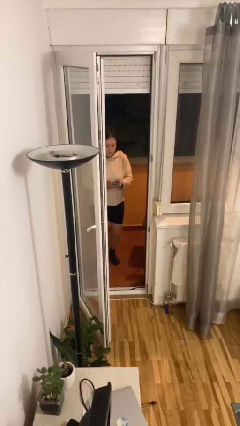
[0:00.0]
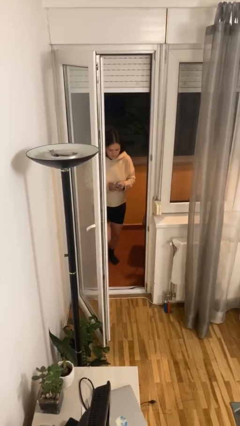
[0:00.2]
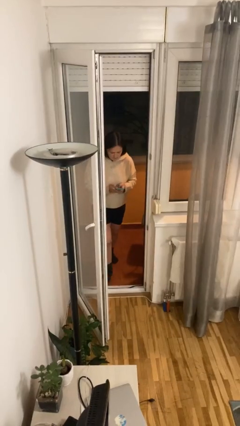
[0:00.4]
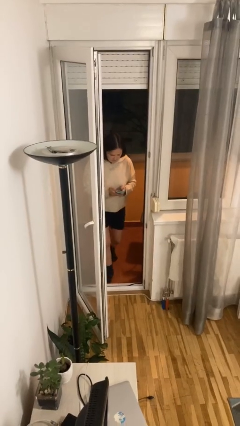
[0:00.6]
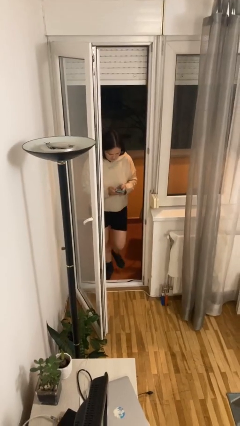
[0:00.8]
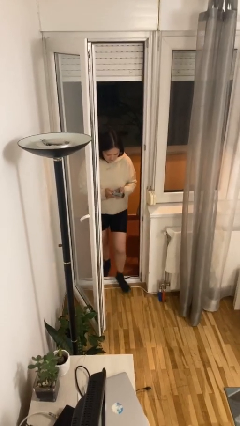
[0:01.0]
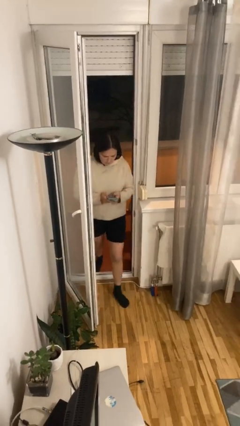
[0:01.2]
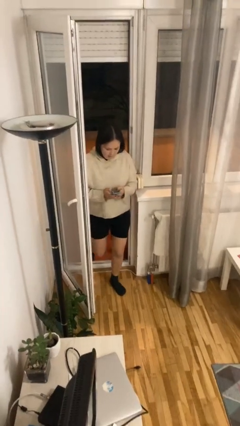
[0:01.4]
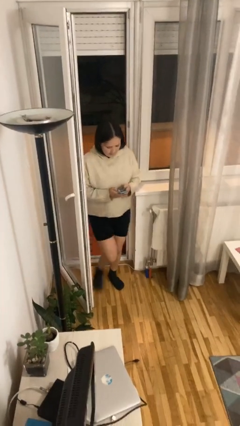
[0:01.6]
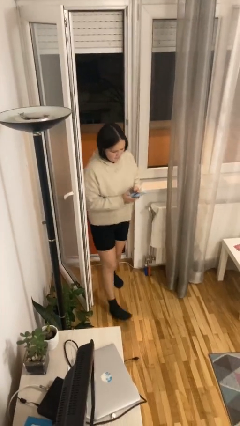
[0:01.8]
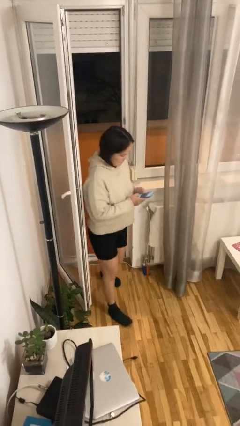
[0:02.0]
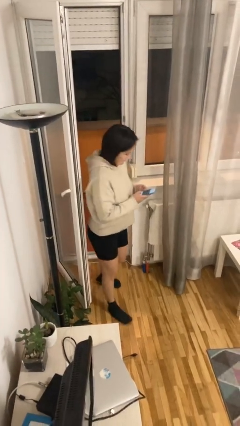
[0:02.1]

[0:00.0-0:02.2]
person enters scene through structure

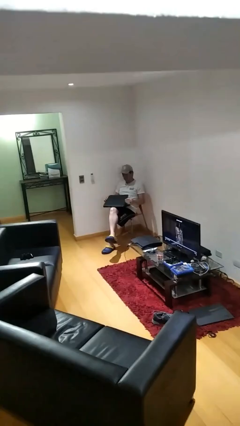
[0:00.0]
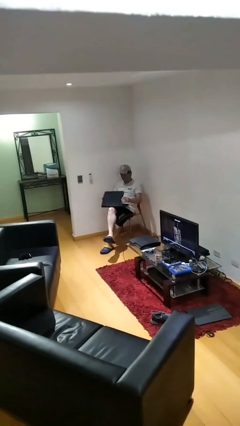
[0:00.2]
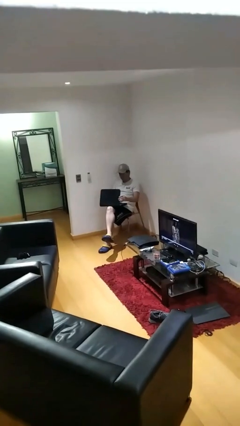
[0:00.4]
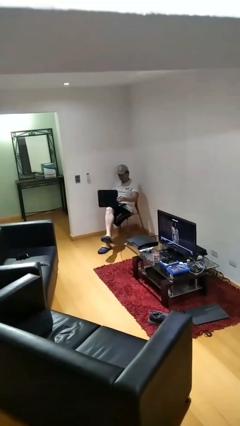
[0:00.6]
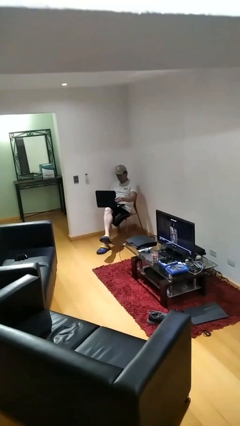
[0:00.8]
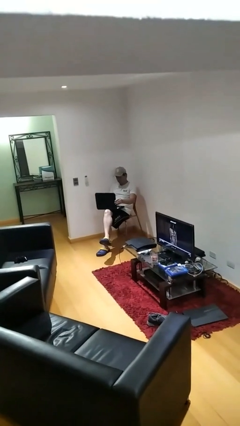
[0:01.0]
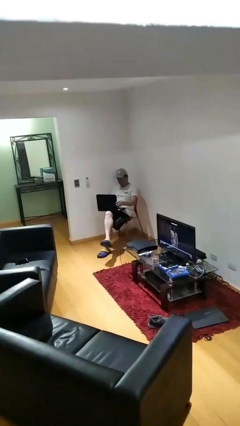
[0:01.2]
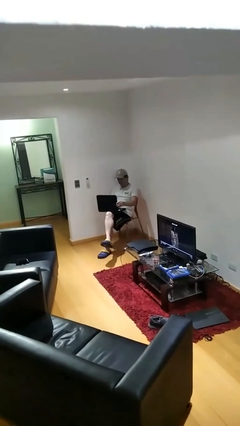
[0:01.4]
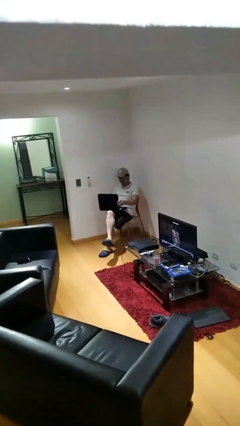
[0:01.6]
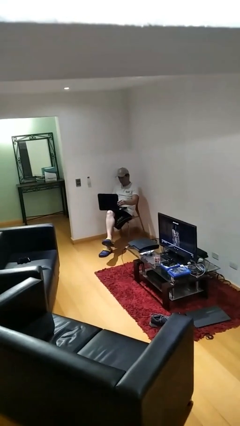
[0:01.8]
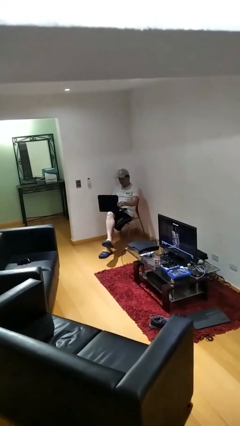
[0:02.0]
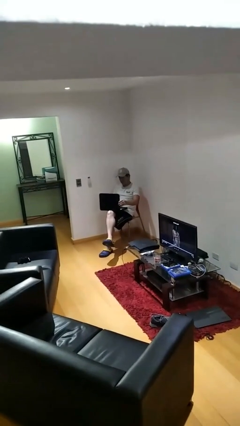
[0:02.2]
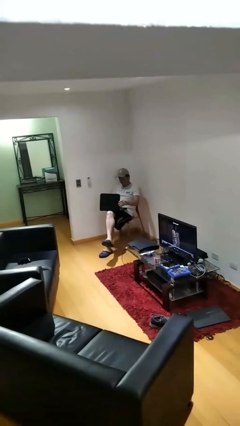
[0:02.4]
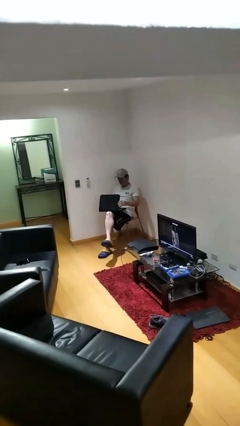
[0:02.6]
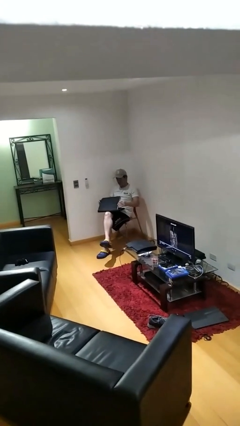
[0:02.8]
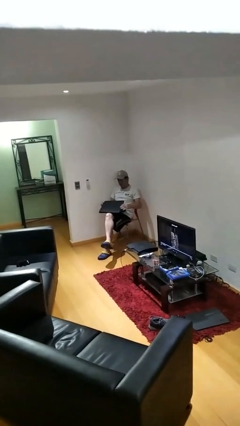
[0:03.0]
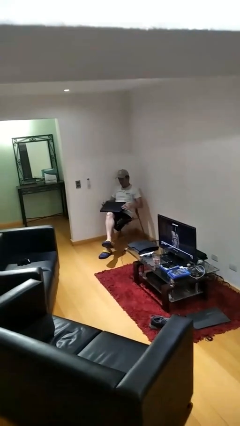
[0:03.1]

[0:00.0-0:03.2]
person interacts with laptop

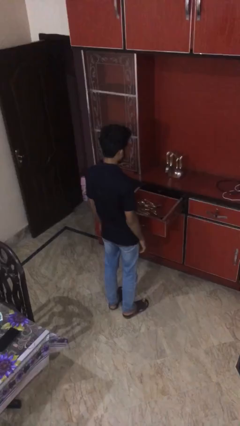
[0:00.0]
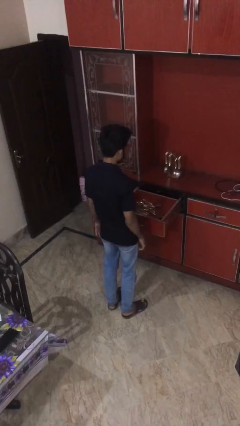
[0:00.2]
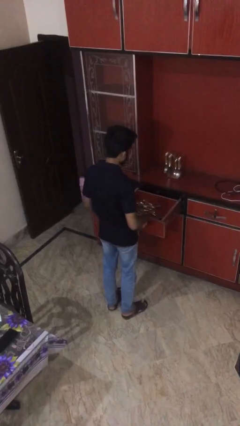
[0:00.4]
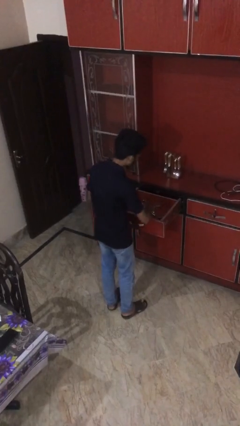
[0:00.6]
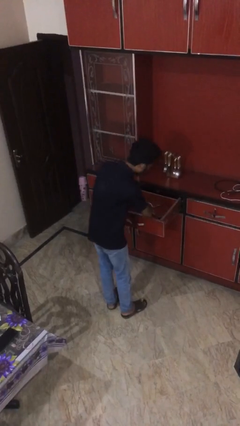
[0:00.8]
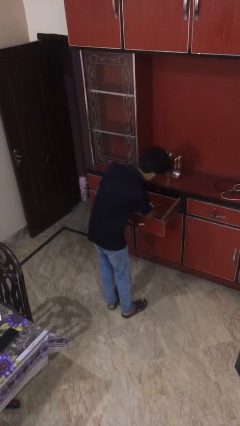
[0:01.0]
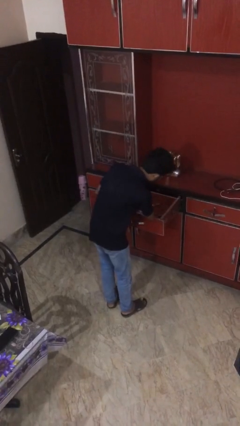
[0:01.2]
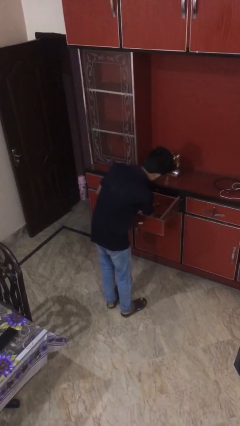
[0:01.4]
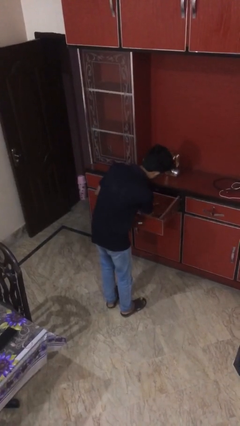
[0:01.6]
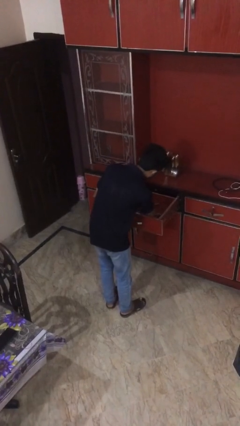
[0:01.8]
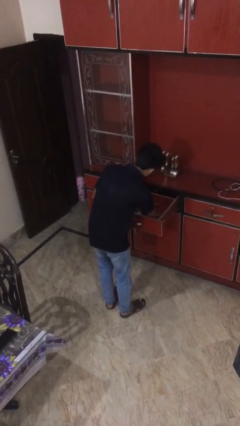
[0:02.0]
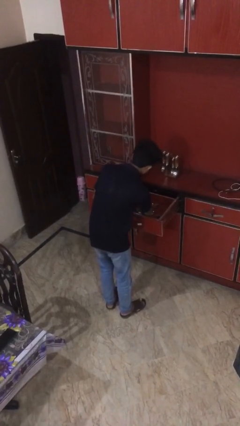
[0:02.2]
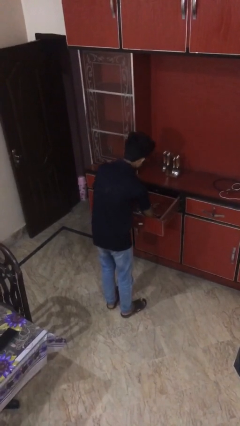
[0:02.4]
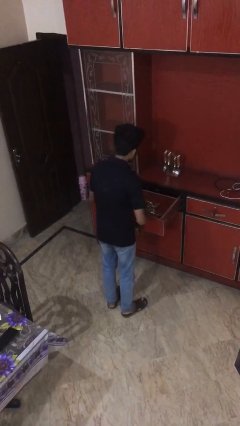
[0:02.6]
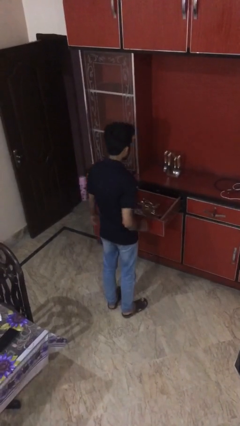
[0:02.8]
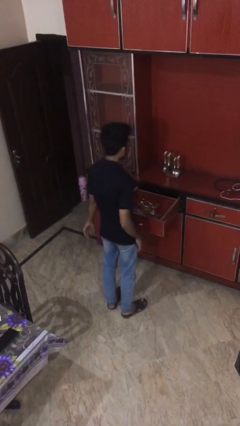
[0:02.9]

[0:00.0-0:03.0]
person searches in kitchen drawer

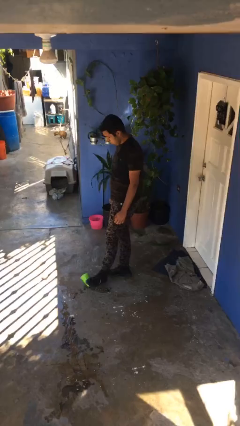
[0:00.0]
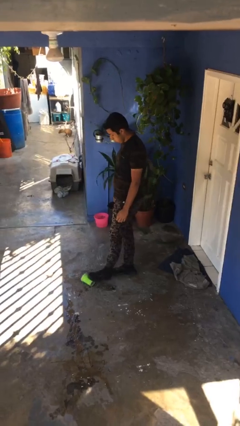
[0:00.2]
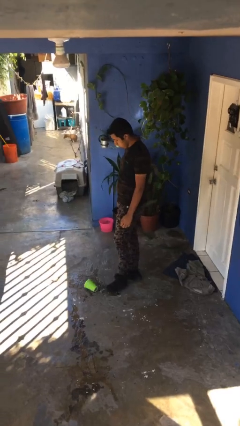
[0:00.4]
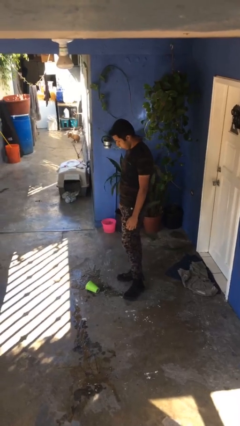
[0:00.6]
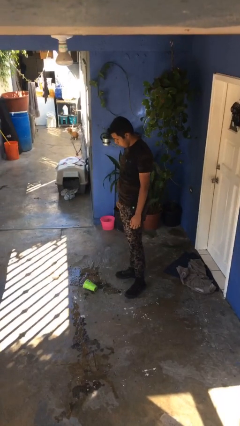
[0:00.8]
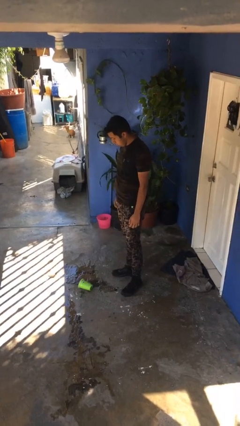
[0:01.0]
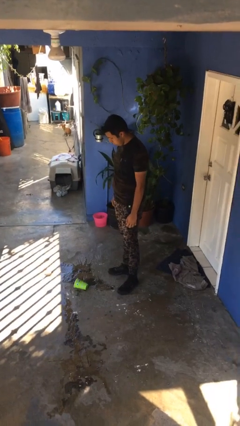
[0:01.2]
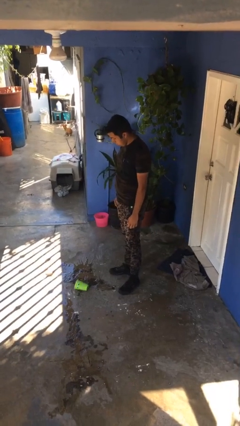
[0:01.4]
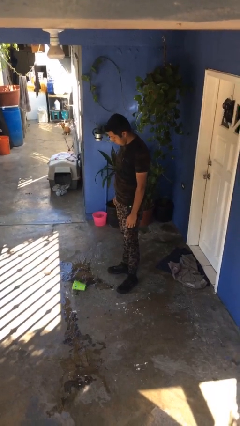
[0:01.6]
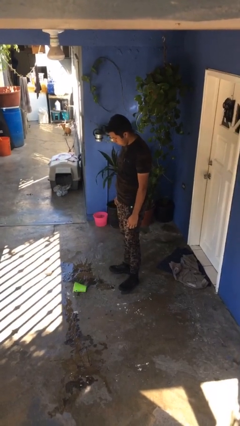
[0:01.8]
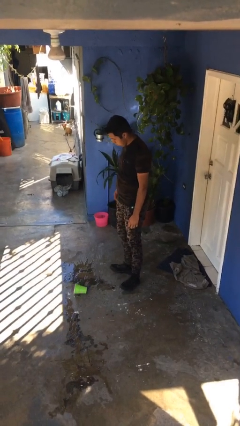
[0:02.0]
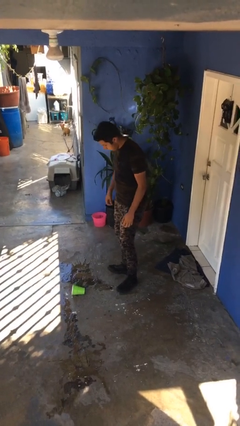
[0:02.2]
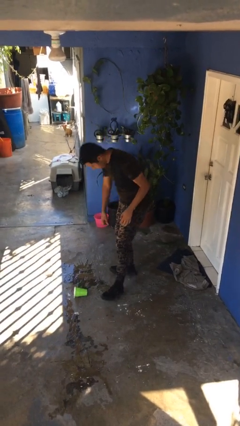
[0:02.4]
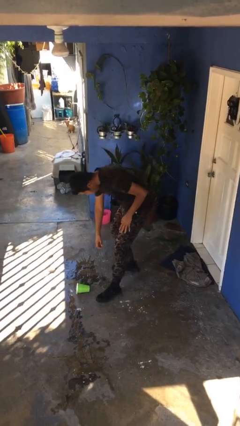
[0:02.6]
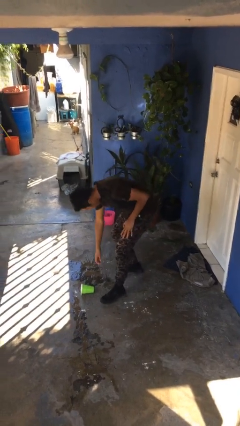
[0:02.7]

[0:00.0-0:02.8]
person spills on floor

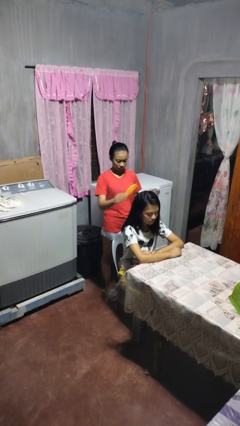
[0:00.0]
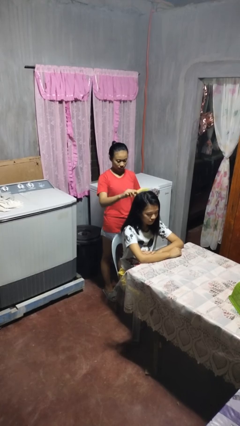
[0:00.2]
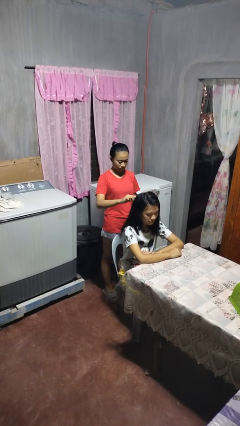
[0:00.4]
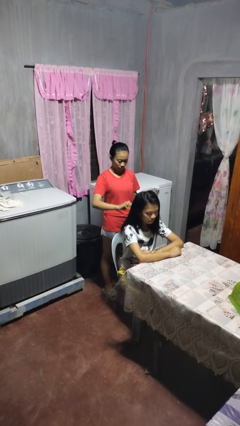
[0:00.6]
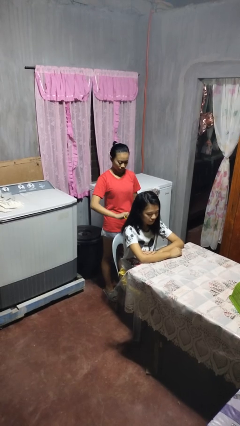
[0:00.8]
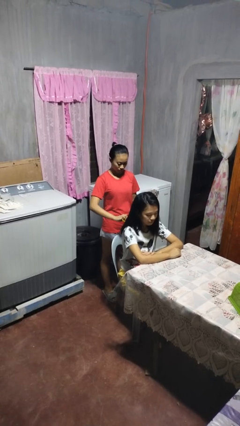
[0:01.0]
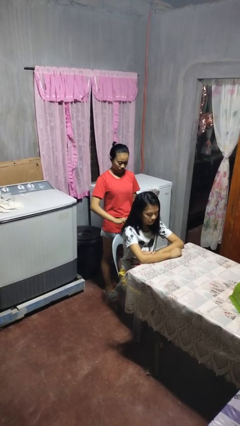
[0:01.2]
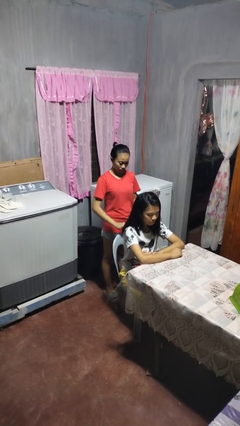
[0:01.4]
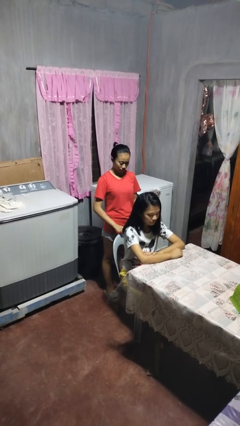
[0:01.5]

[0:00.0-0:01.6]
person brushes hair of person

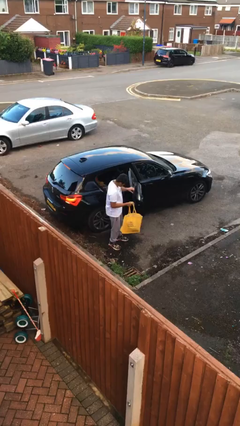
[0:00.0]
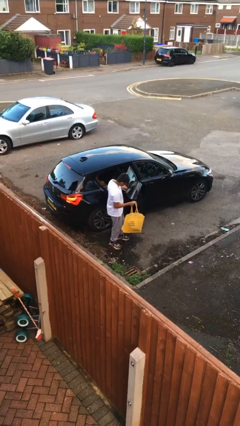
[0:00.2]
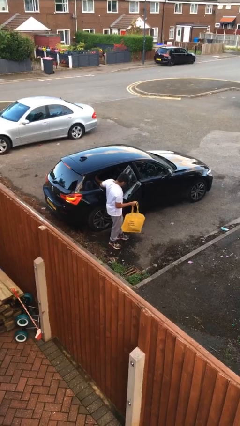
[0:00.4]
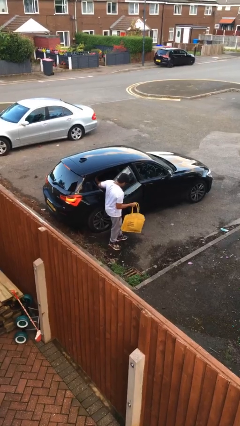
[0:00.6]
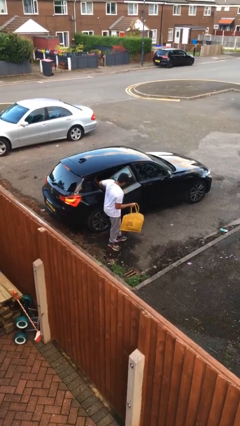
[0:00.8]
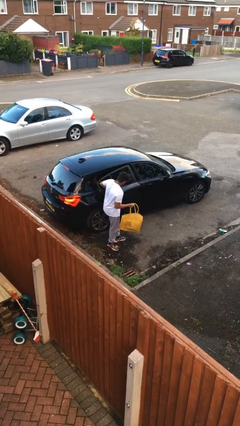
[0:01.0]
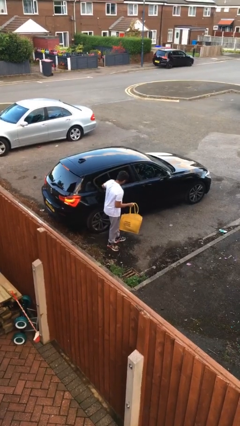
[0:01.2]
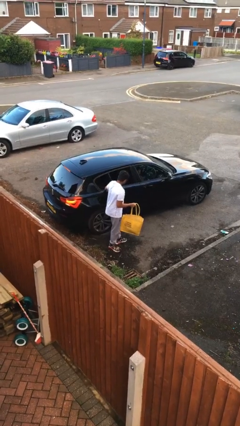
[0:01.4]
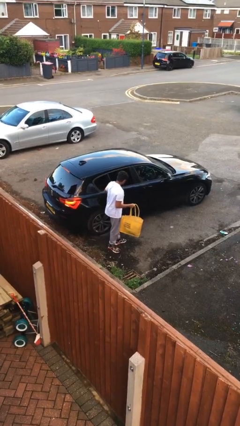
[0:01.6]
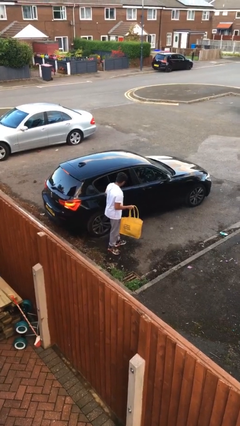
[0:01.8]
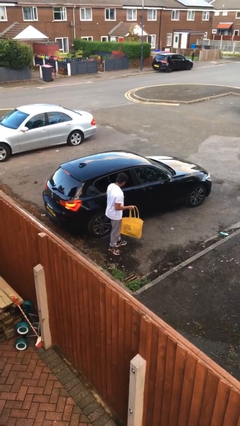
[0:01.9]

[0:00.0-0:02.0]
person closes car door

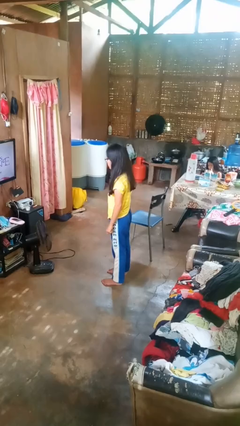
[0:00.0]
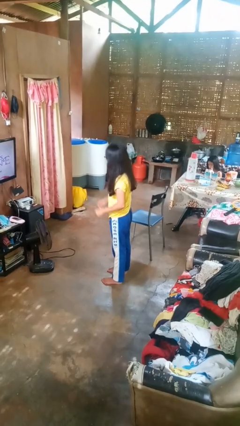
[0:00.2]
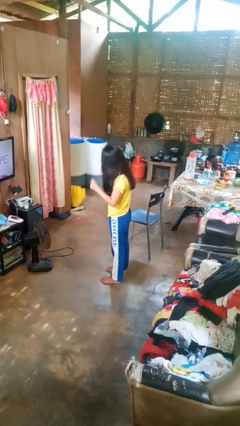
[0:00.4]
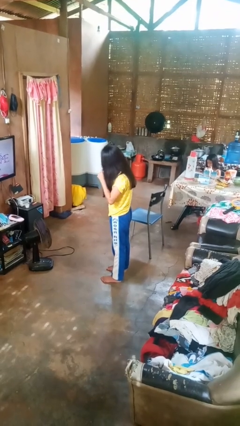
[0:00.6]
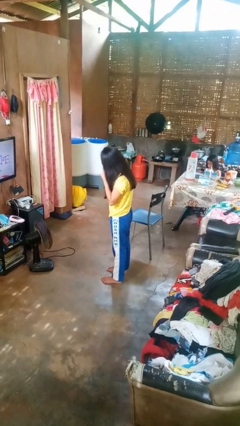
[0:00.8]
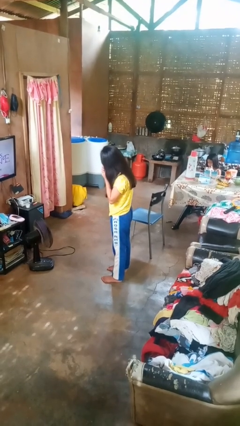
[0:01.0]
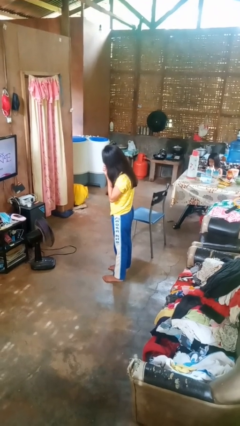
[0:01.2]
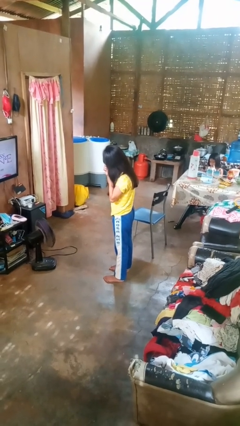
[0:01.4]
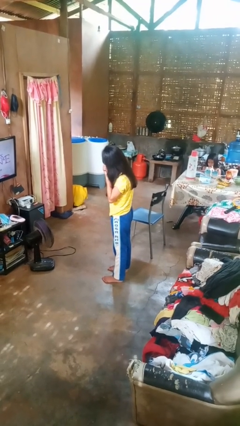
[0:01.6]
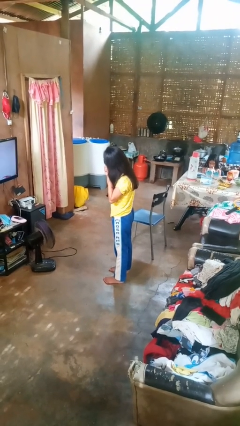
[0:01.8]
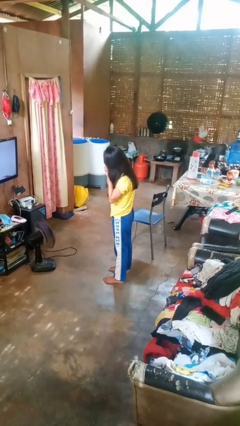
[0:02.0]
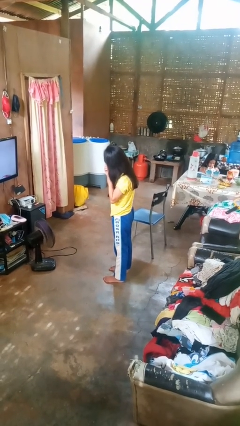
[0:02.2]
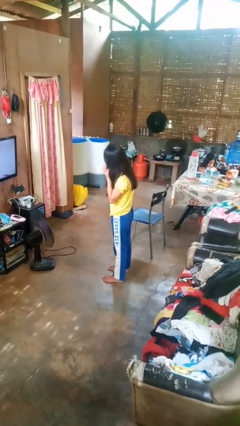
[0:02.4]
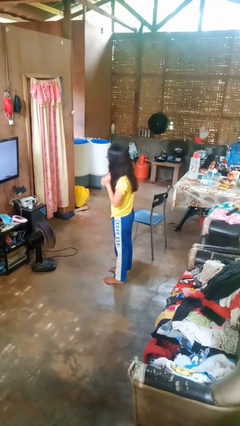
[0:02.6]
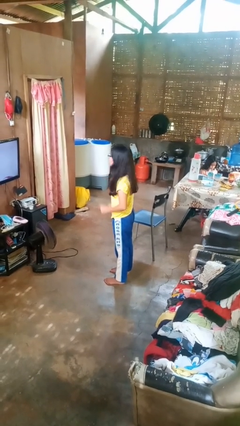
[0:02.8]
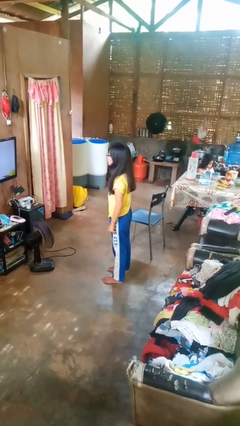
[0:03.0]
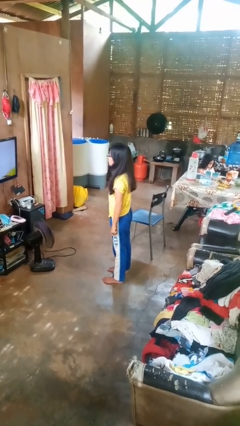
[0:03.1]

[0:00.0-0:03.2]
person takes off earrings
